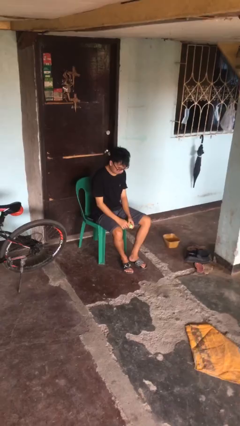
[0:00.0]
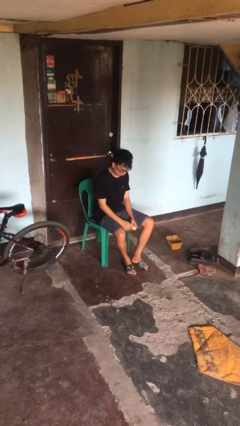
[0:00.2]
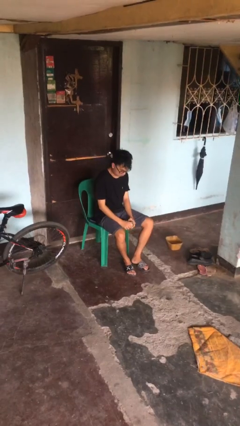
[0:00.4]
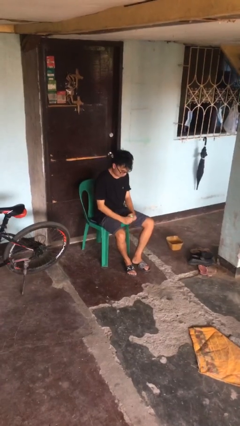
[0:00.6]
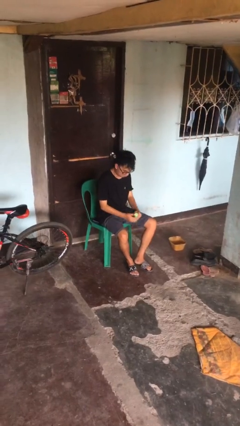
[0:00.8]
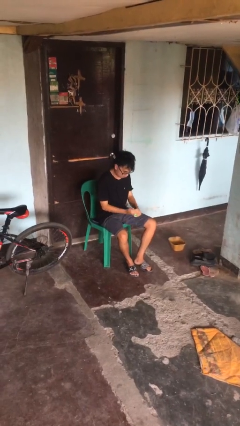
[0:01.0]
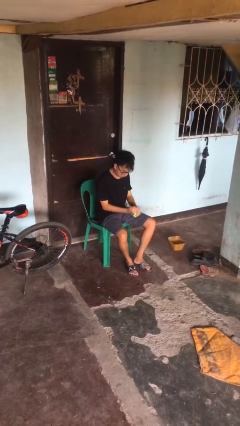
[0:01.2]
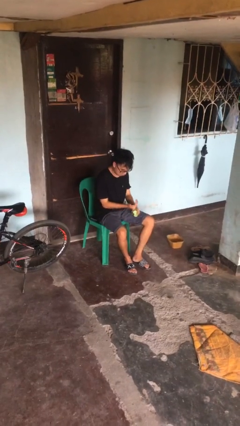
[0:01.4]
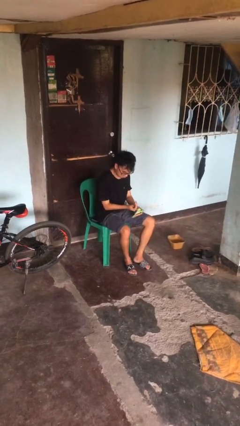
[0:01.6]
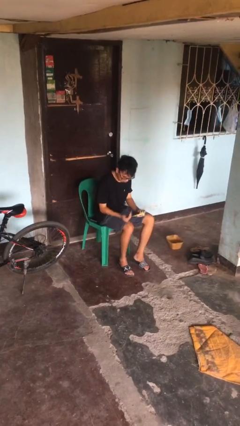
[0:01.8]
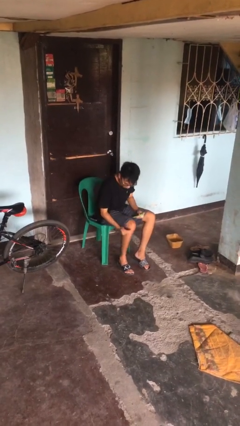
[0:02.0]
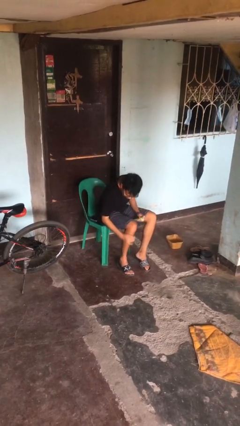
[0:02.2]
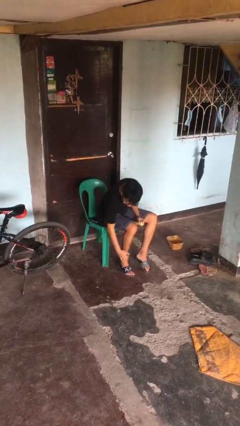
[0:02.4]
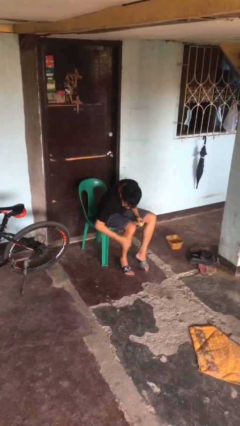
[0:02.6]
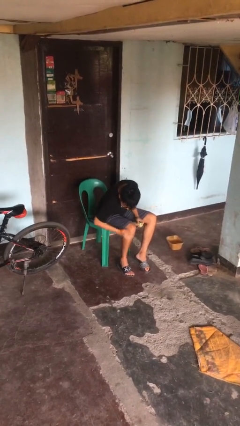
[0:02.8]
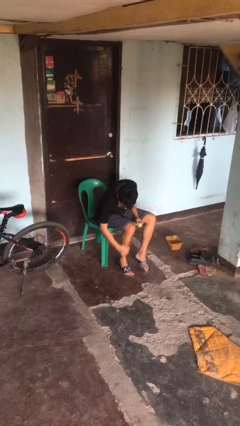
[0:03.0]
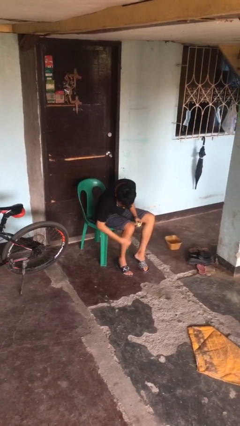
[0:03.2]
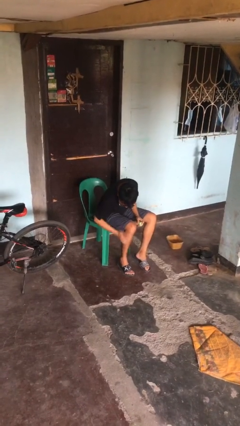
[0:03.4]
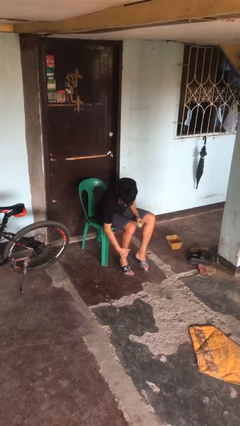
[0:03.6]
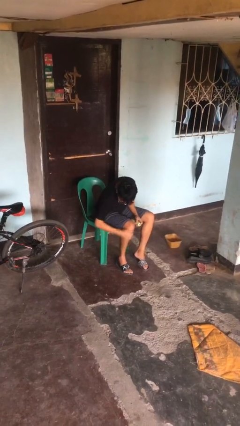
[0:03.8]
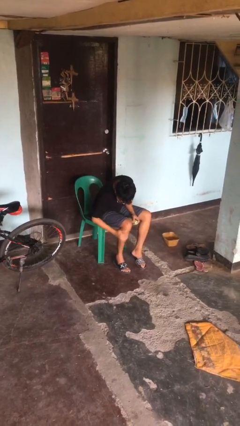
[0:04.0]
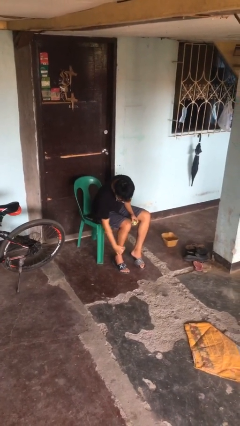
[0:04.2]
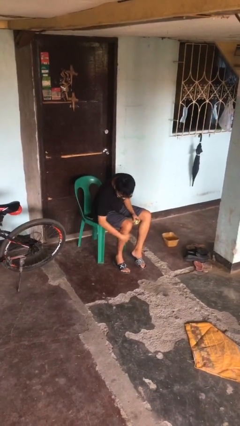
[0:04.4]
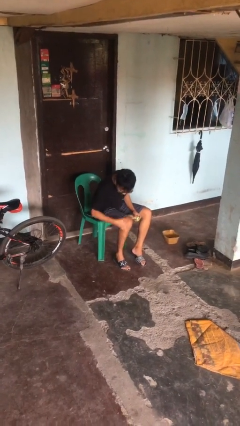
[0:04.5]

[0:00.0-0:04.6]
person applies sunscreen

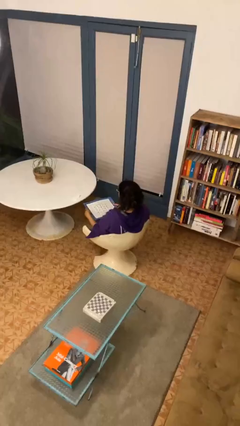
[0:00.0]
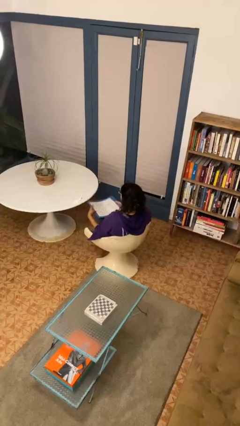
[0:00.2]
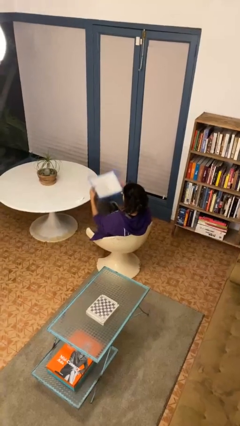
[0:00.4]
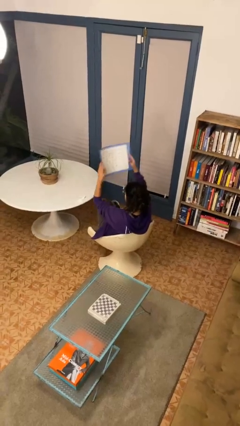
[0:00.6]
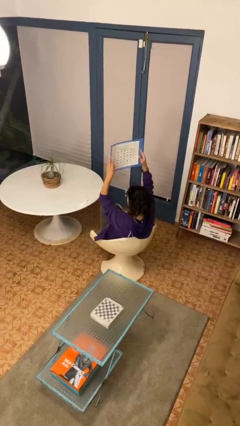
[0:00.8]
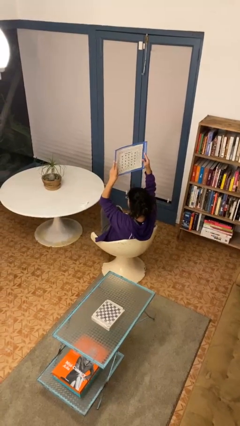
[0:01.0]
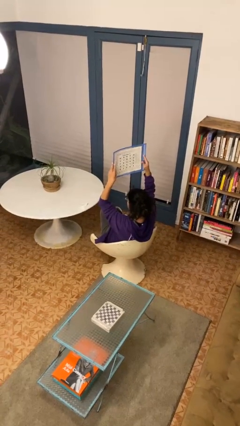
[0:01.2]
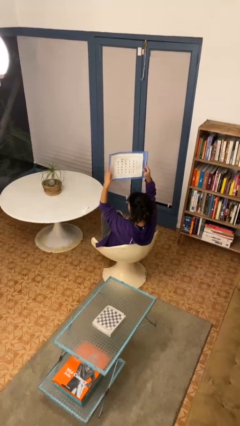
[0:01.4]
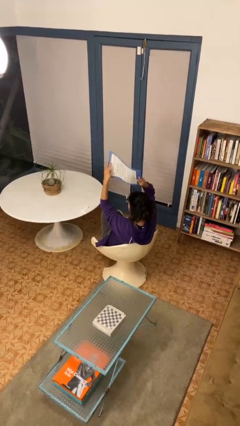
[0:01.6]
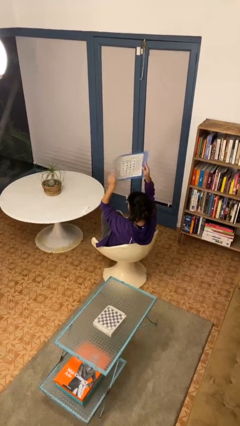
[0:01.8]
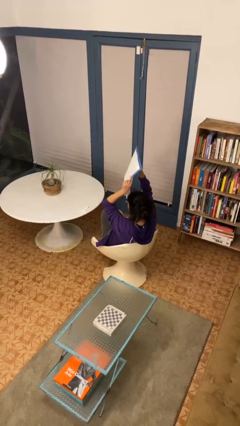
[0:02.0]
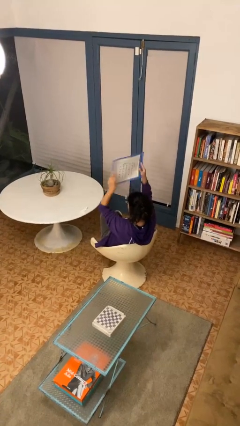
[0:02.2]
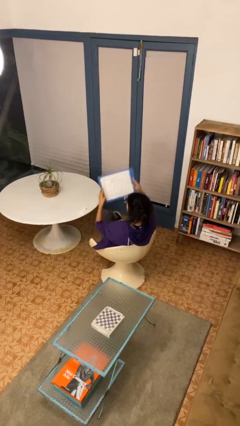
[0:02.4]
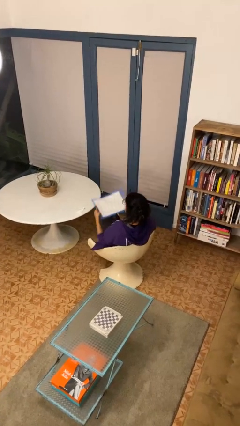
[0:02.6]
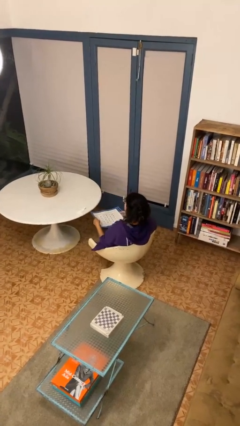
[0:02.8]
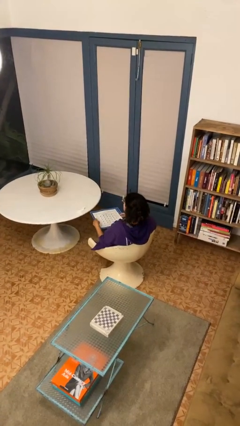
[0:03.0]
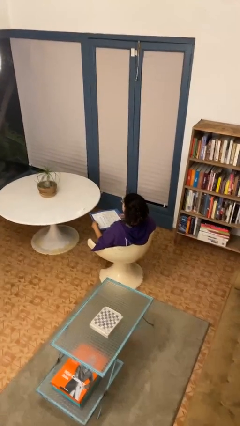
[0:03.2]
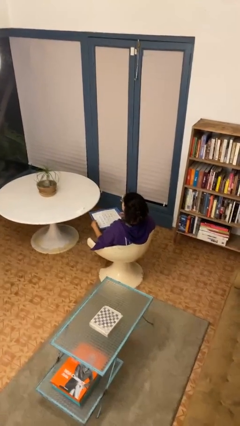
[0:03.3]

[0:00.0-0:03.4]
person holds object above head

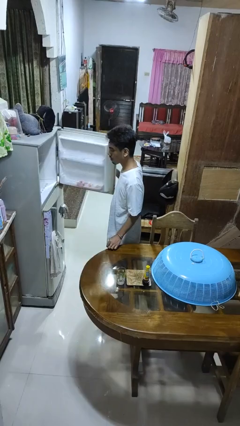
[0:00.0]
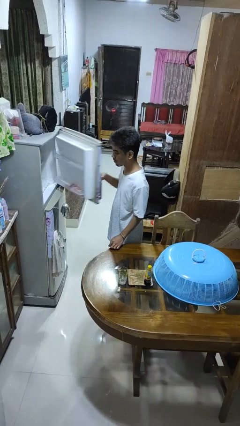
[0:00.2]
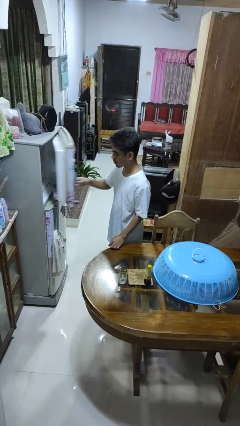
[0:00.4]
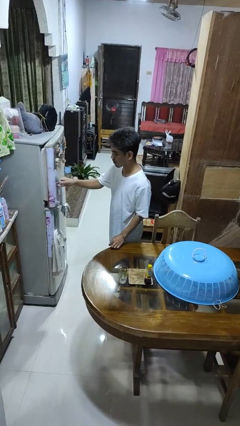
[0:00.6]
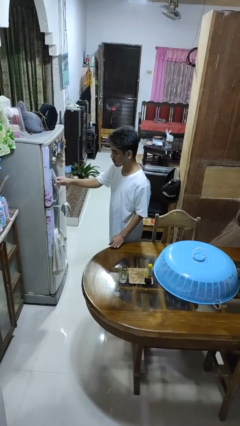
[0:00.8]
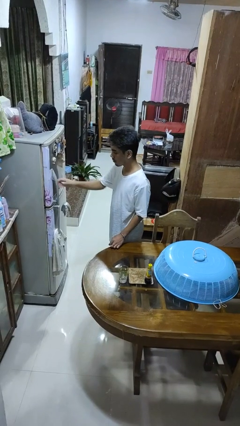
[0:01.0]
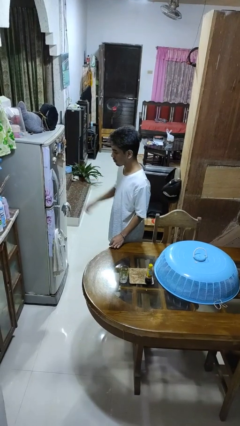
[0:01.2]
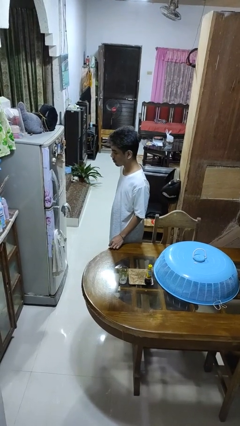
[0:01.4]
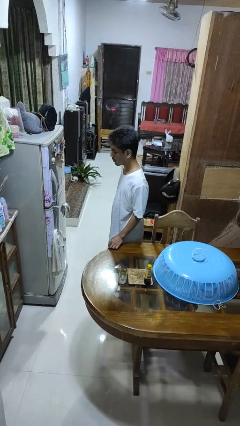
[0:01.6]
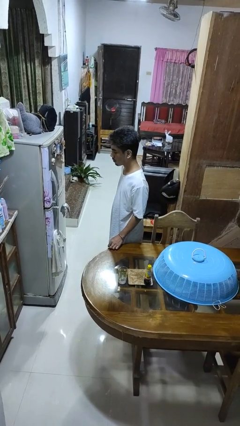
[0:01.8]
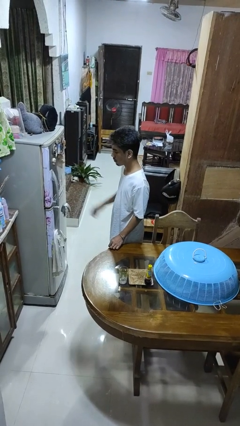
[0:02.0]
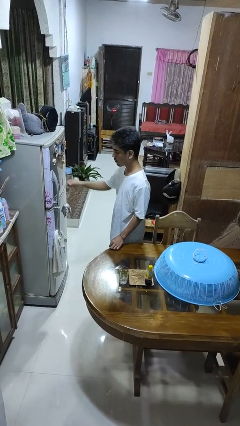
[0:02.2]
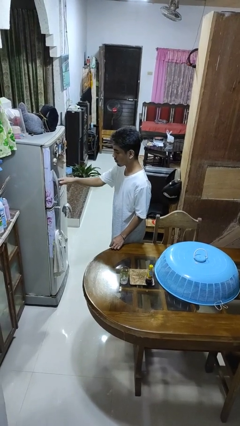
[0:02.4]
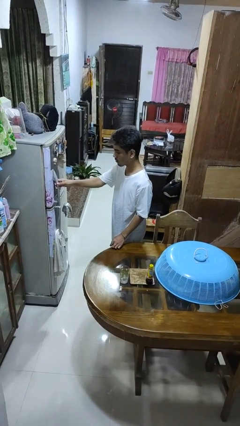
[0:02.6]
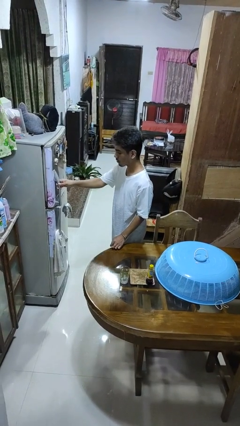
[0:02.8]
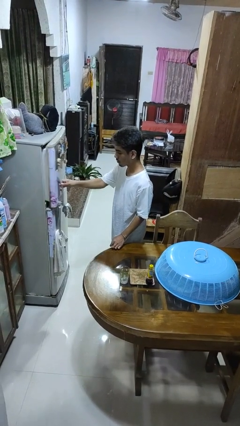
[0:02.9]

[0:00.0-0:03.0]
person closes refrigerator

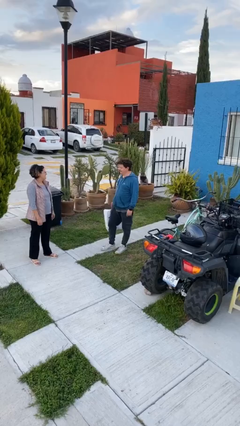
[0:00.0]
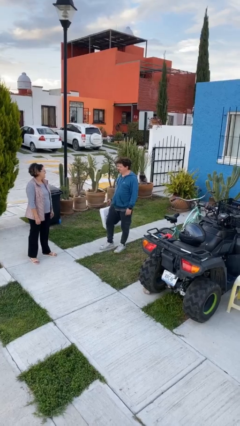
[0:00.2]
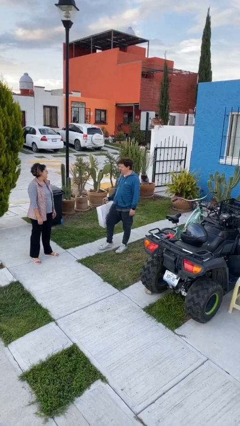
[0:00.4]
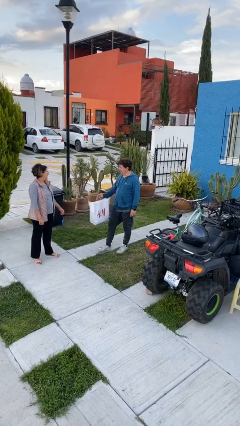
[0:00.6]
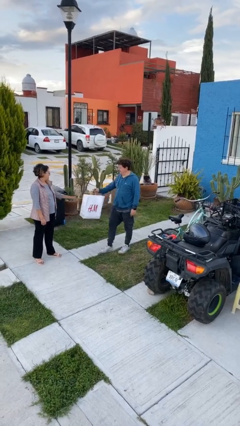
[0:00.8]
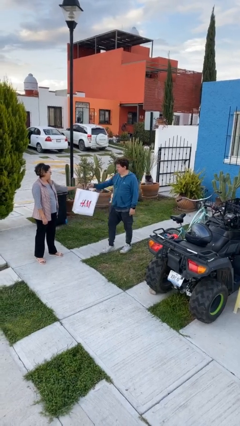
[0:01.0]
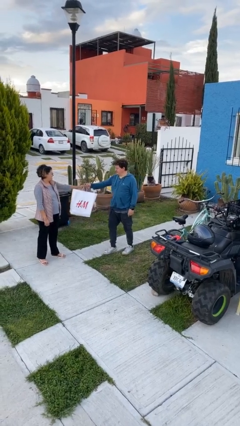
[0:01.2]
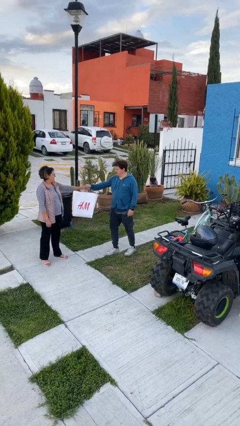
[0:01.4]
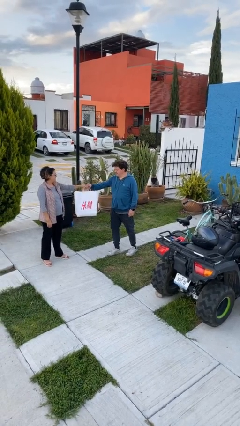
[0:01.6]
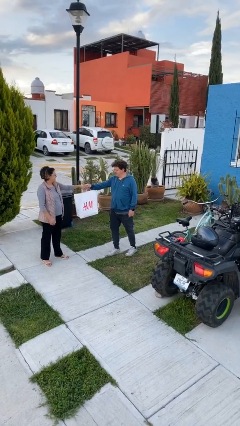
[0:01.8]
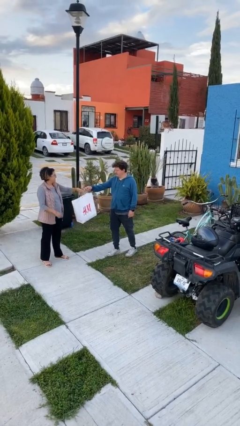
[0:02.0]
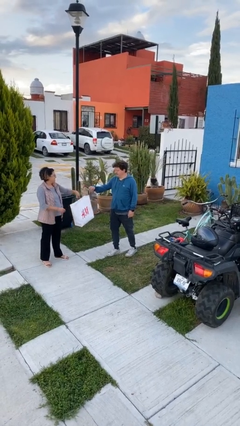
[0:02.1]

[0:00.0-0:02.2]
person transfers object to person

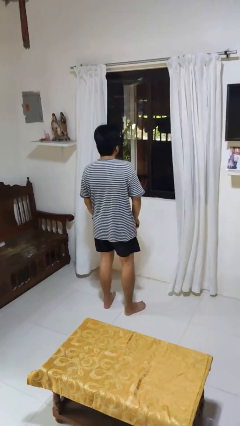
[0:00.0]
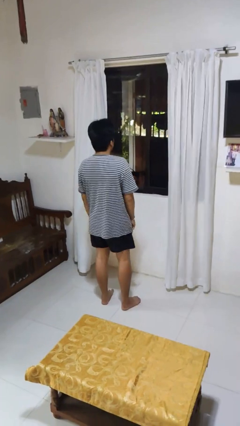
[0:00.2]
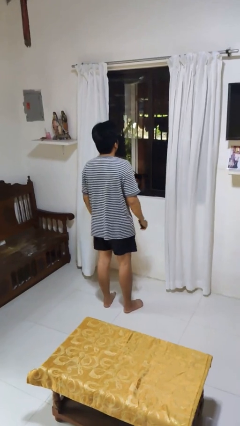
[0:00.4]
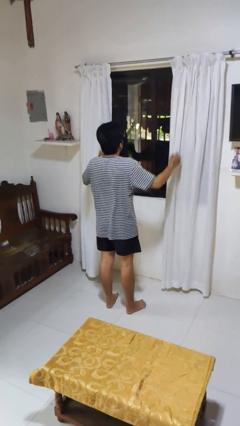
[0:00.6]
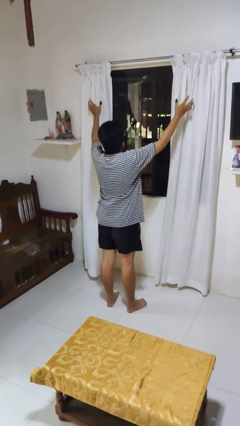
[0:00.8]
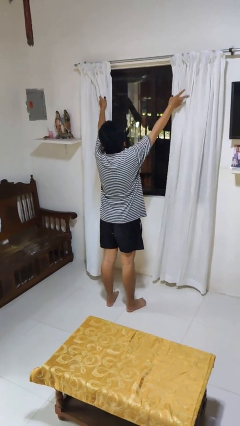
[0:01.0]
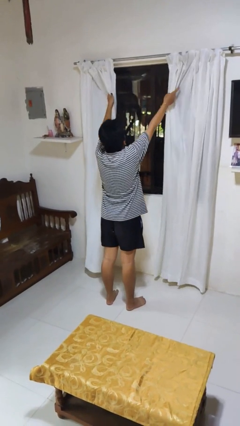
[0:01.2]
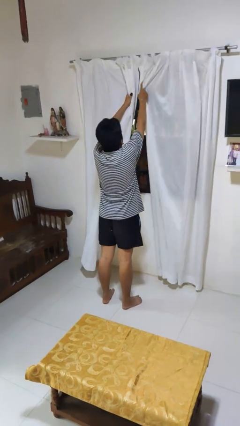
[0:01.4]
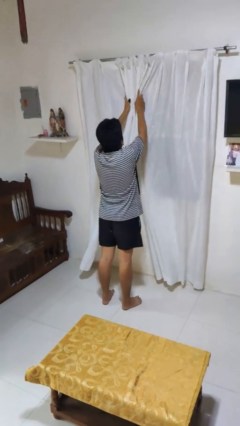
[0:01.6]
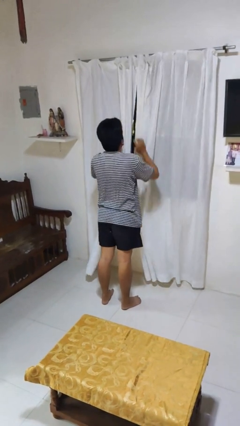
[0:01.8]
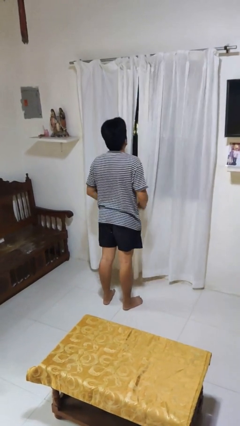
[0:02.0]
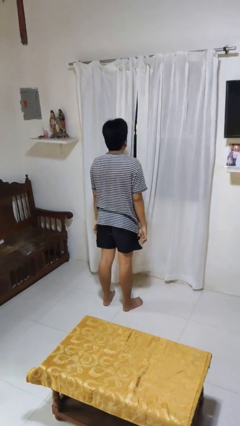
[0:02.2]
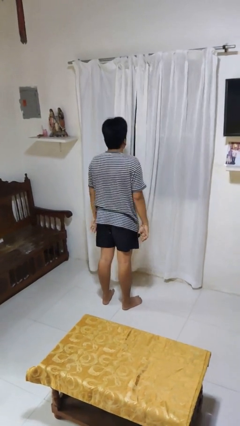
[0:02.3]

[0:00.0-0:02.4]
person closes curtains

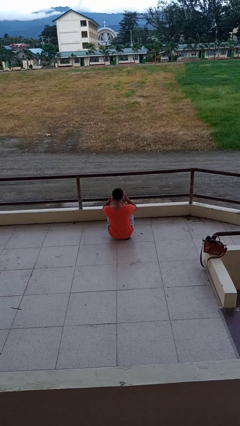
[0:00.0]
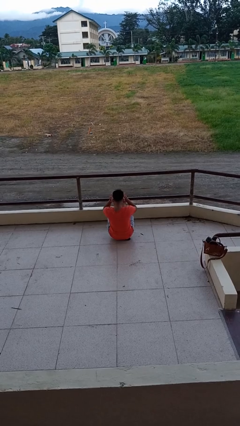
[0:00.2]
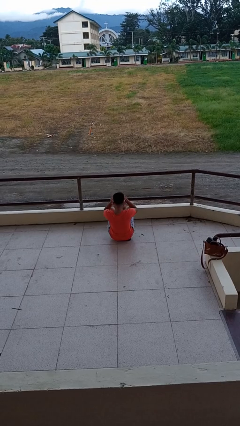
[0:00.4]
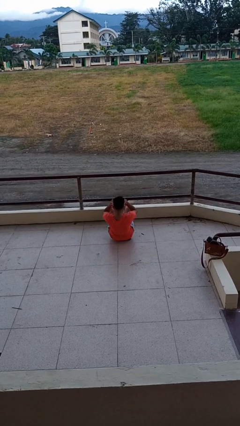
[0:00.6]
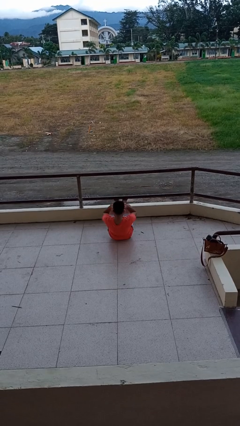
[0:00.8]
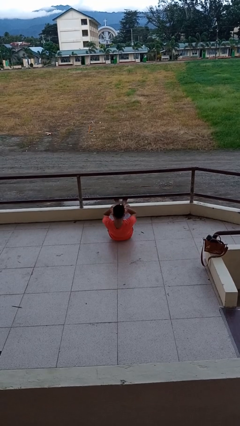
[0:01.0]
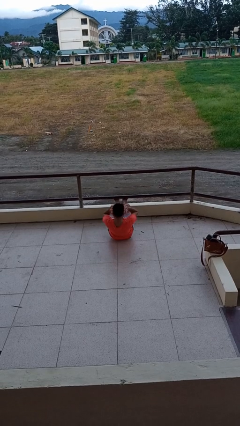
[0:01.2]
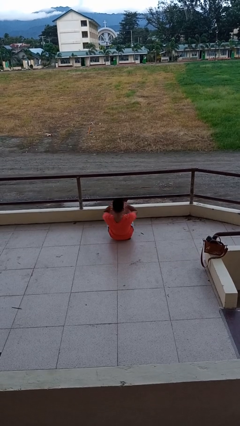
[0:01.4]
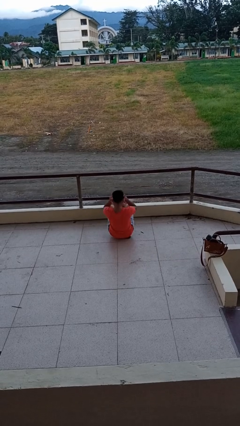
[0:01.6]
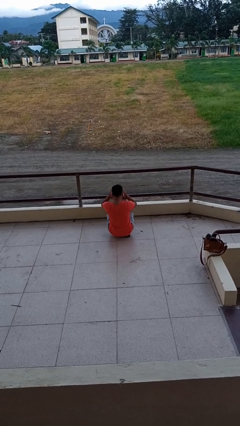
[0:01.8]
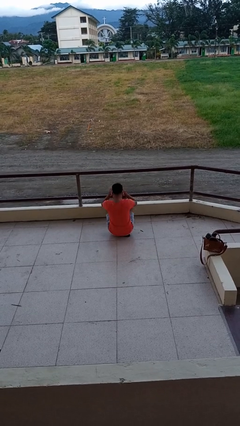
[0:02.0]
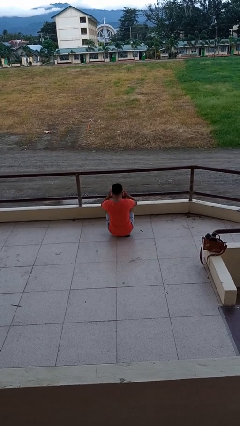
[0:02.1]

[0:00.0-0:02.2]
person exercises with situp
